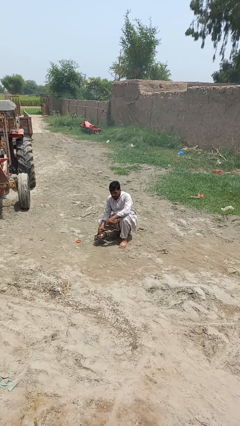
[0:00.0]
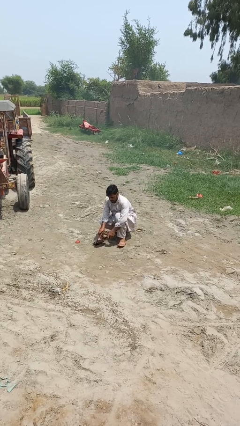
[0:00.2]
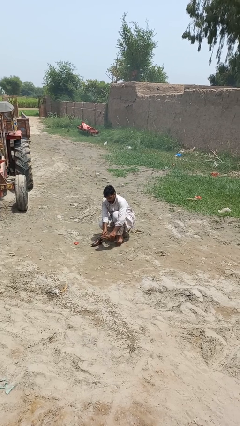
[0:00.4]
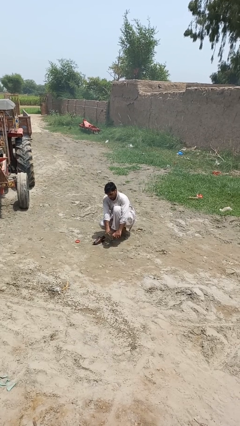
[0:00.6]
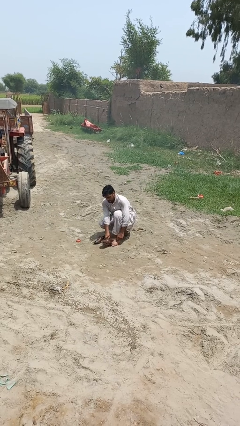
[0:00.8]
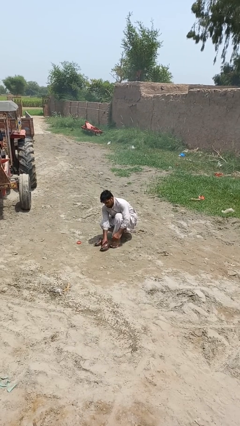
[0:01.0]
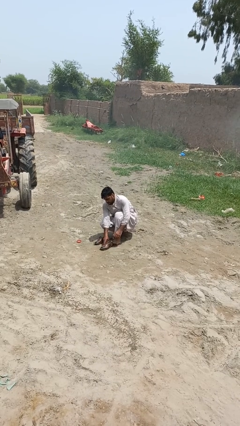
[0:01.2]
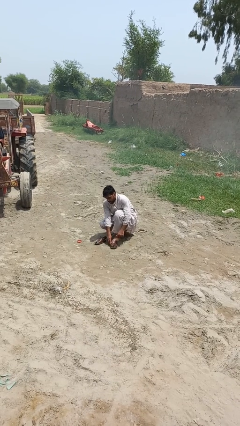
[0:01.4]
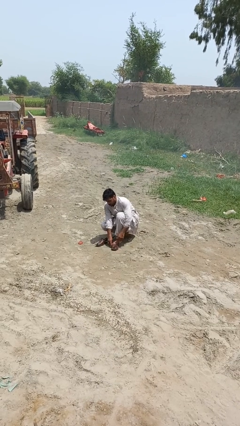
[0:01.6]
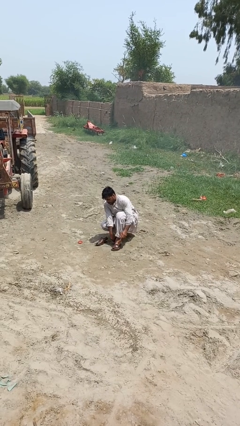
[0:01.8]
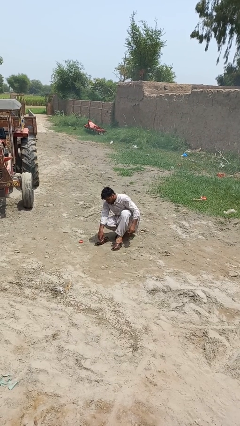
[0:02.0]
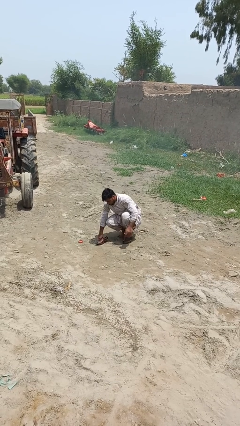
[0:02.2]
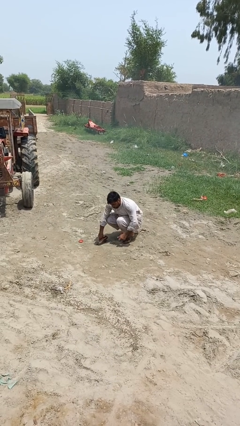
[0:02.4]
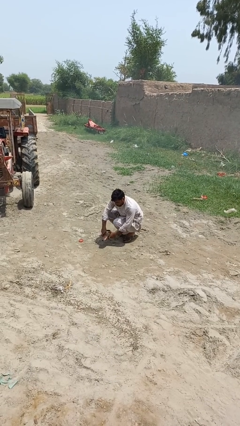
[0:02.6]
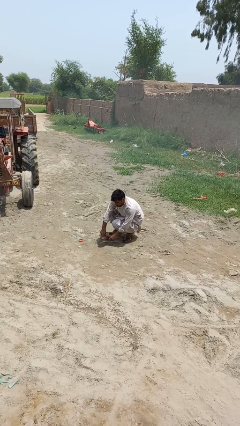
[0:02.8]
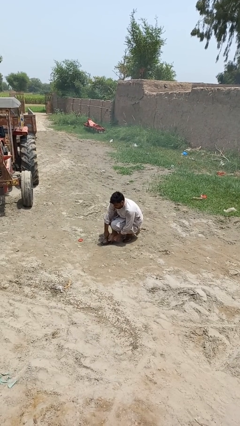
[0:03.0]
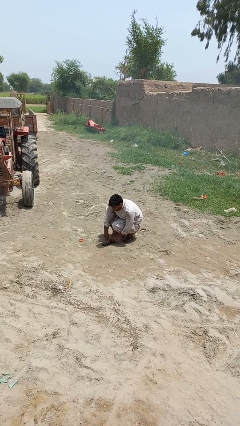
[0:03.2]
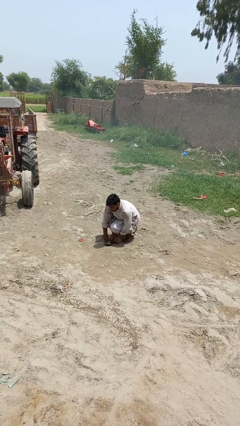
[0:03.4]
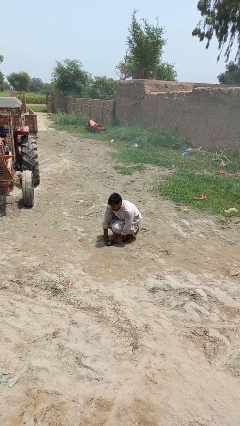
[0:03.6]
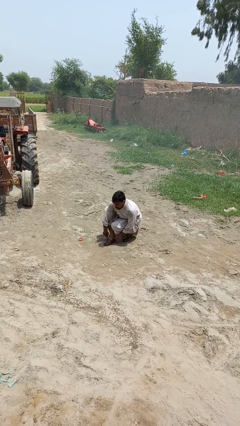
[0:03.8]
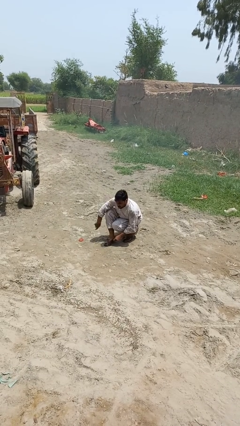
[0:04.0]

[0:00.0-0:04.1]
person puts on shoes

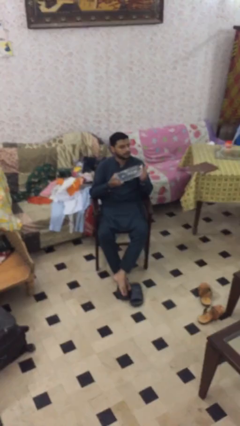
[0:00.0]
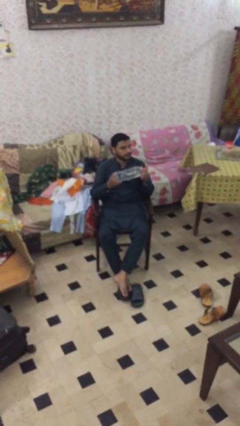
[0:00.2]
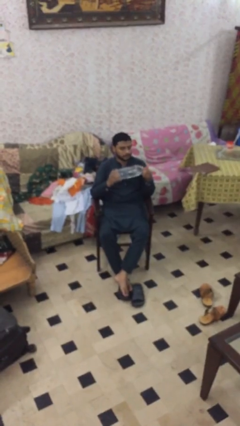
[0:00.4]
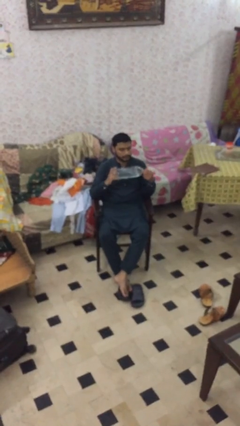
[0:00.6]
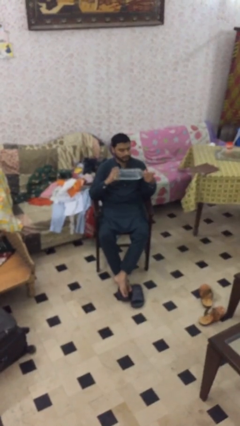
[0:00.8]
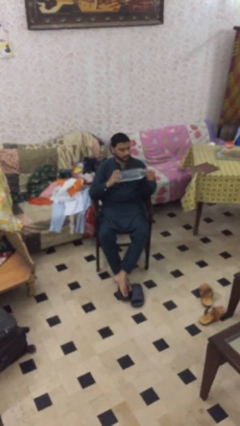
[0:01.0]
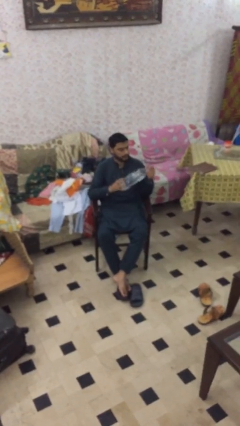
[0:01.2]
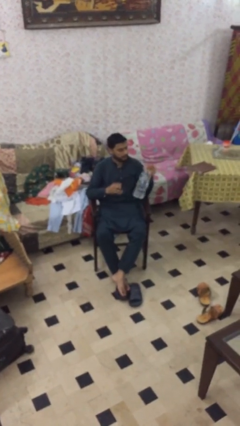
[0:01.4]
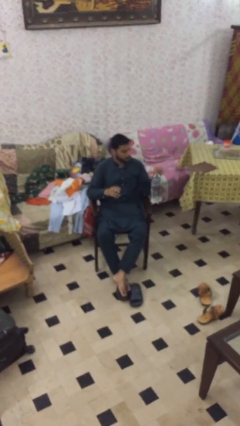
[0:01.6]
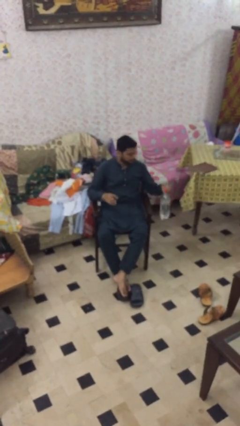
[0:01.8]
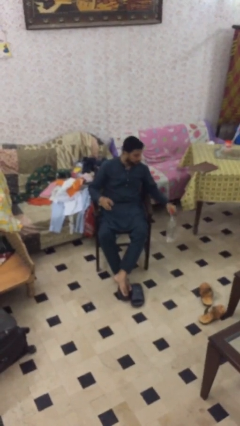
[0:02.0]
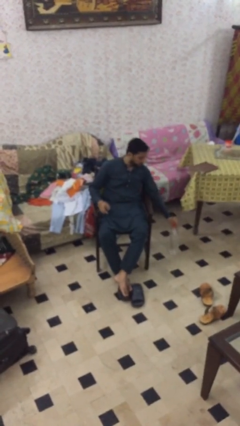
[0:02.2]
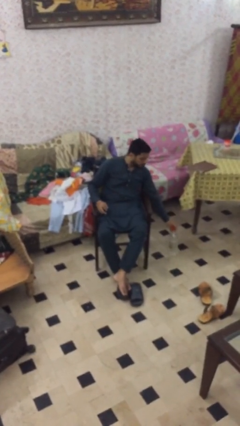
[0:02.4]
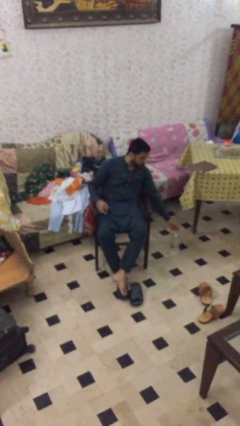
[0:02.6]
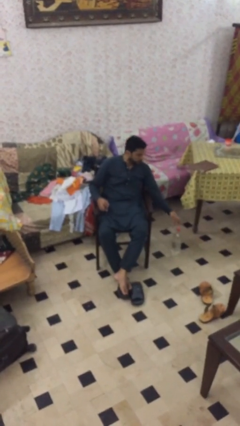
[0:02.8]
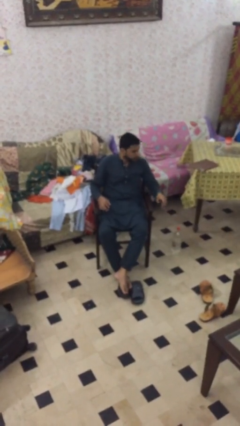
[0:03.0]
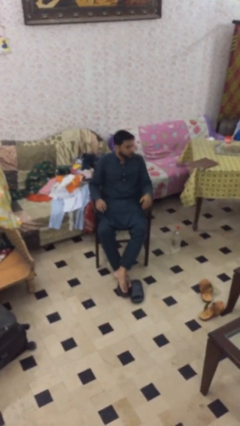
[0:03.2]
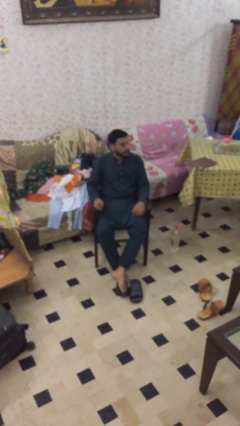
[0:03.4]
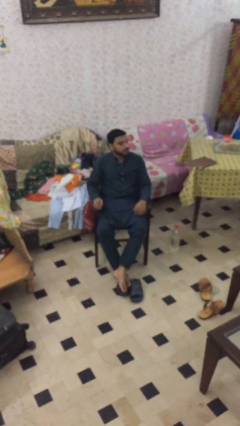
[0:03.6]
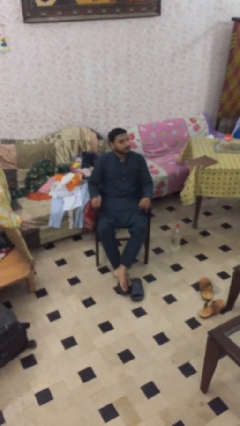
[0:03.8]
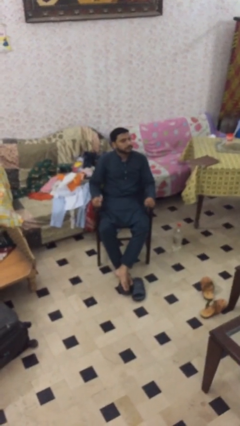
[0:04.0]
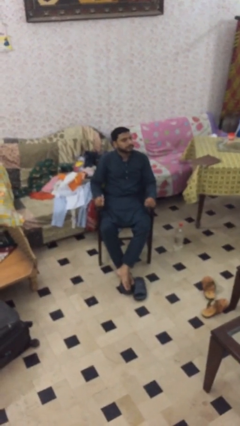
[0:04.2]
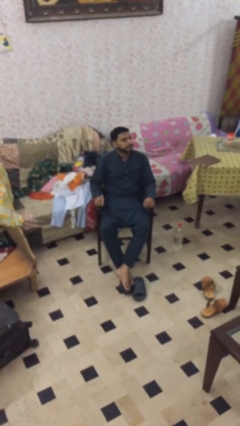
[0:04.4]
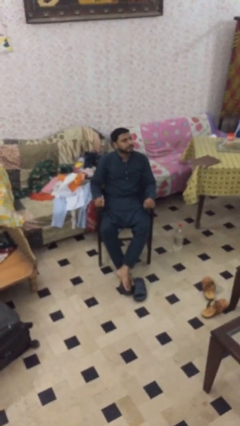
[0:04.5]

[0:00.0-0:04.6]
person puts down object on floor

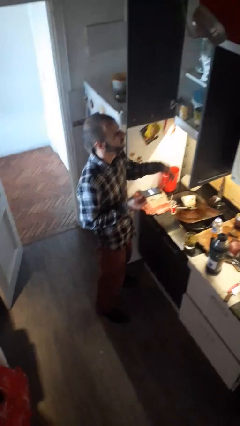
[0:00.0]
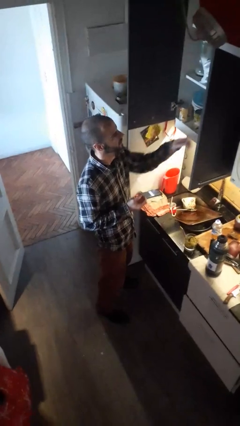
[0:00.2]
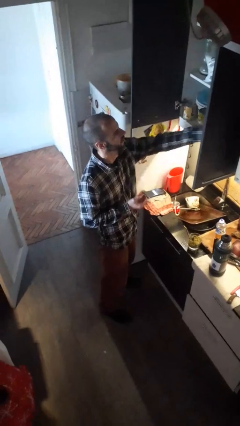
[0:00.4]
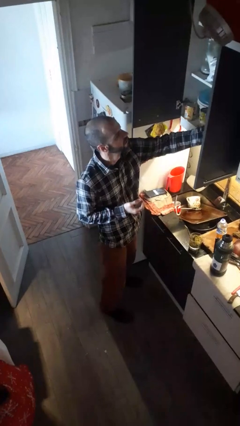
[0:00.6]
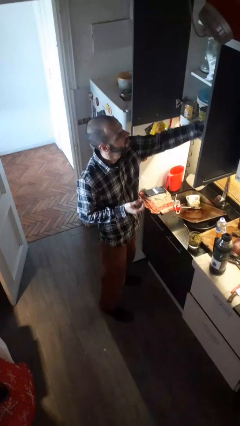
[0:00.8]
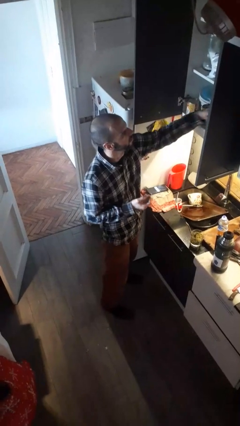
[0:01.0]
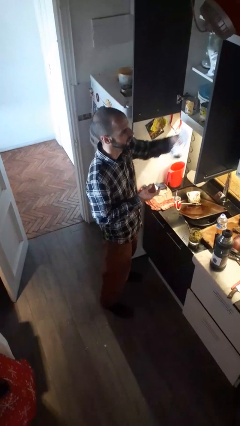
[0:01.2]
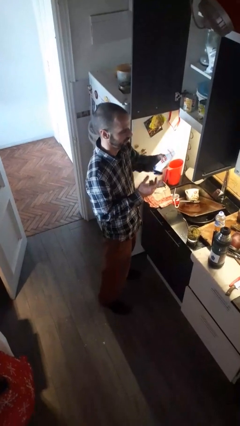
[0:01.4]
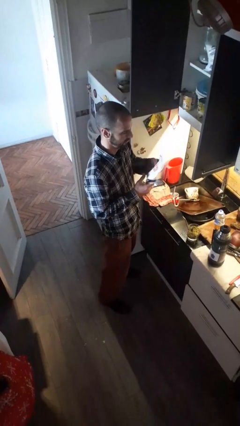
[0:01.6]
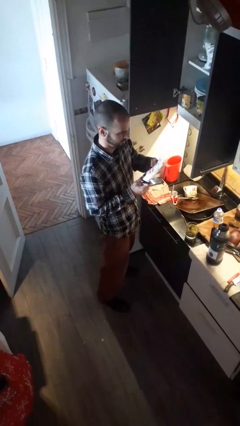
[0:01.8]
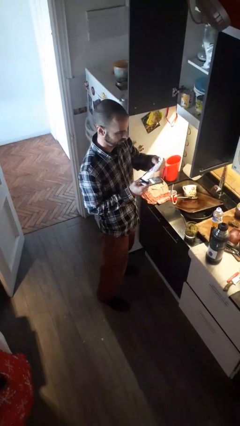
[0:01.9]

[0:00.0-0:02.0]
person takes object from kitchen drawer

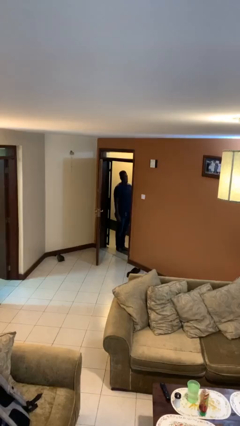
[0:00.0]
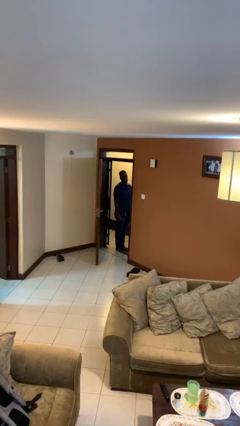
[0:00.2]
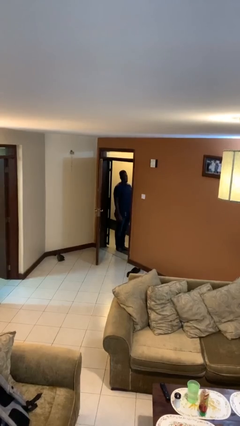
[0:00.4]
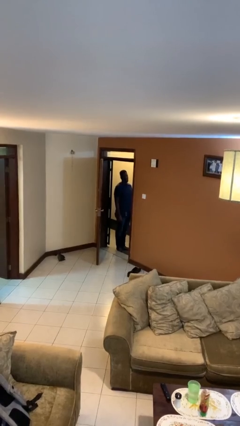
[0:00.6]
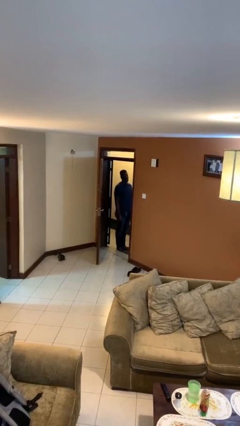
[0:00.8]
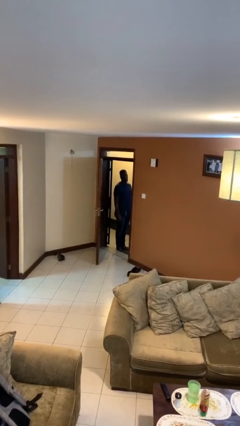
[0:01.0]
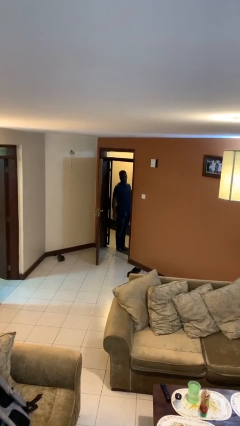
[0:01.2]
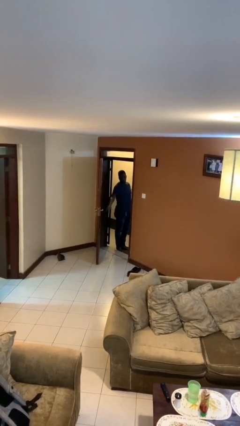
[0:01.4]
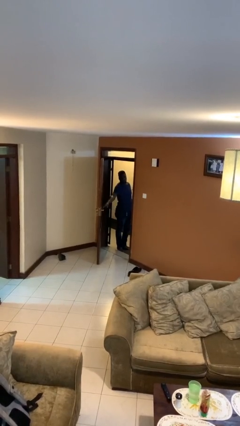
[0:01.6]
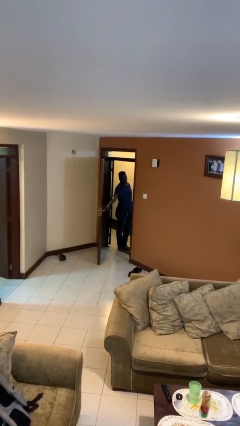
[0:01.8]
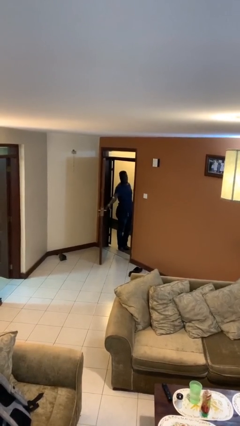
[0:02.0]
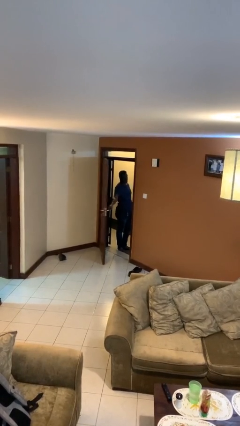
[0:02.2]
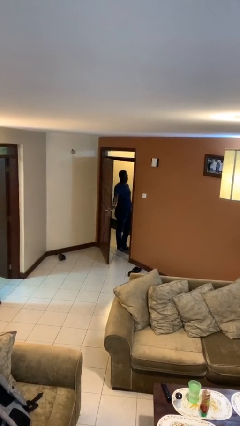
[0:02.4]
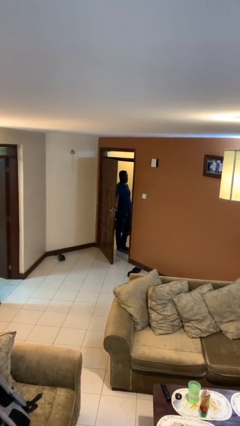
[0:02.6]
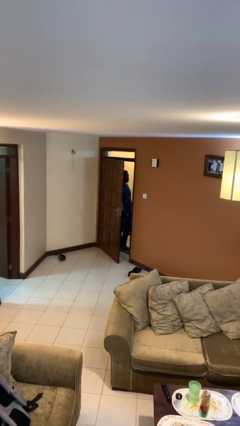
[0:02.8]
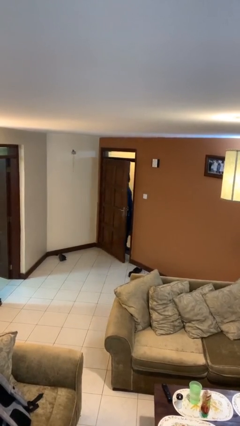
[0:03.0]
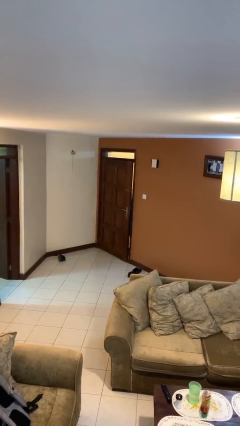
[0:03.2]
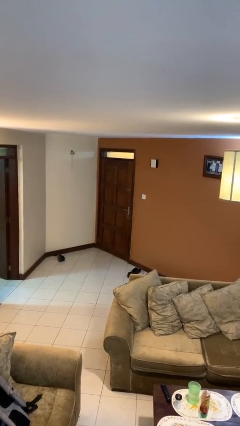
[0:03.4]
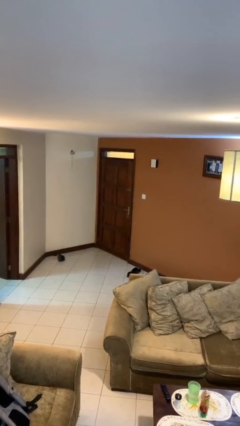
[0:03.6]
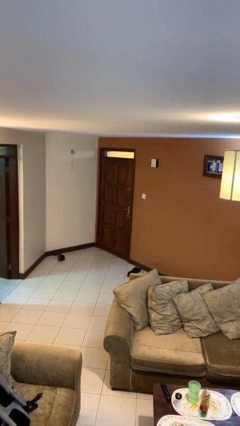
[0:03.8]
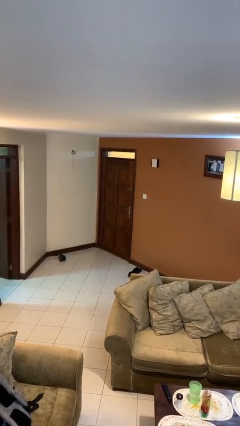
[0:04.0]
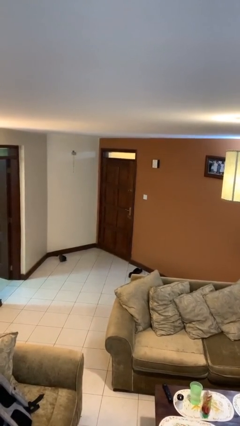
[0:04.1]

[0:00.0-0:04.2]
person closes facility door

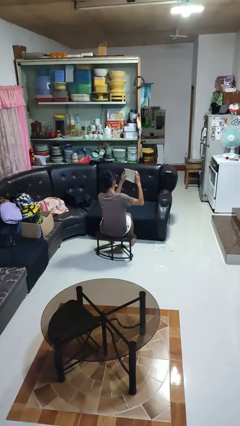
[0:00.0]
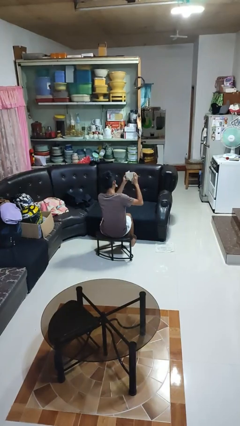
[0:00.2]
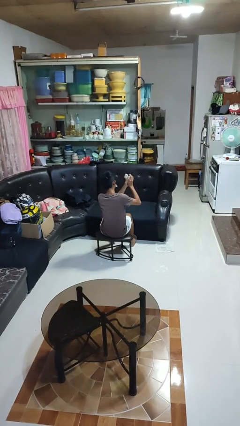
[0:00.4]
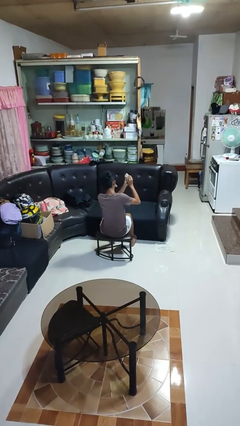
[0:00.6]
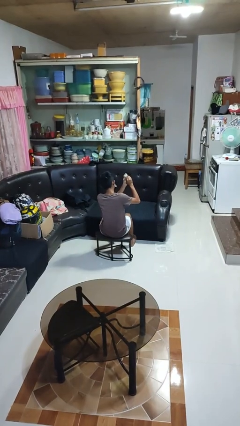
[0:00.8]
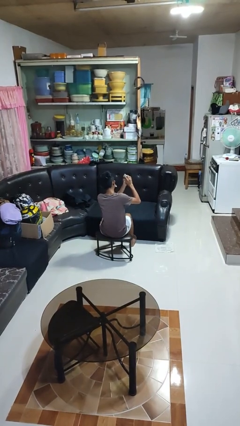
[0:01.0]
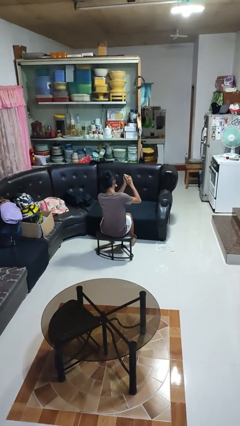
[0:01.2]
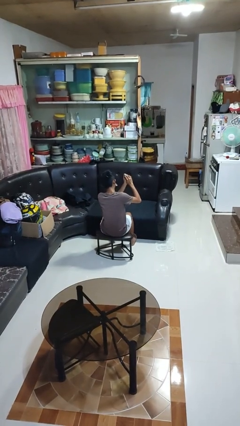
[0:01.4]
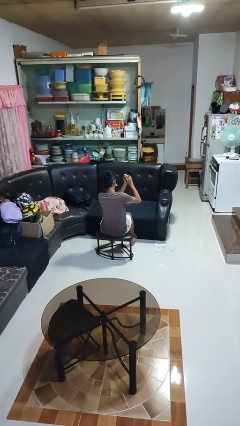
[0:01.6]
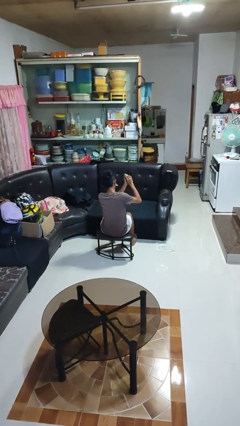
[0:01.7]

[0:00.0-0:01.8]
person crumples paper

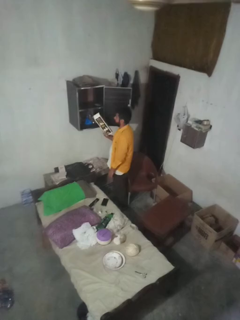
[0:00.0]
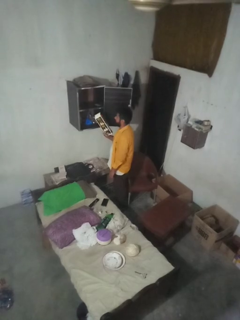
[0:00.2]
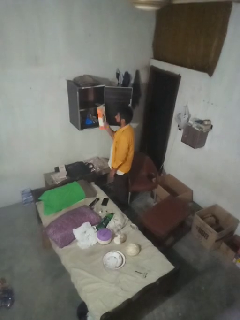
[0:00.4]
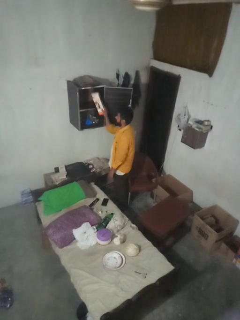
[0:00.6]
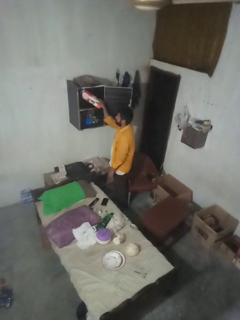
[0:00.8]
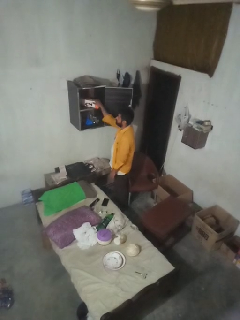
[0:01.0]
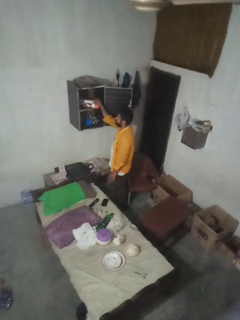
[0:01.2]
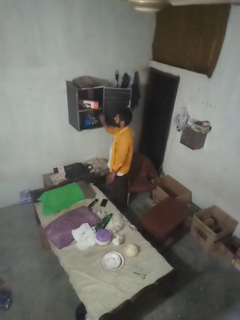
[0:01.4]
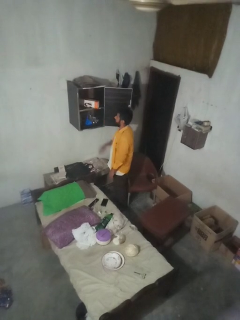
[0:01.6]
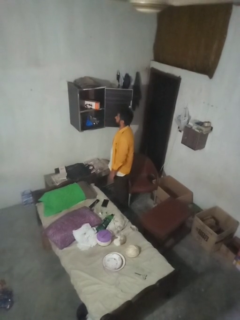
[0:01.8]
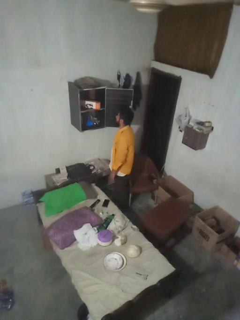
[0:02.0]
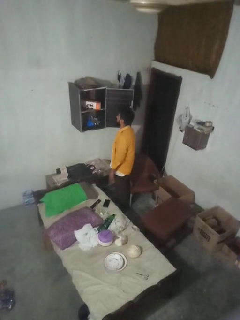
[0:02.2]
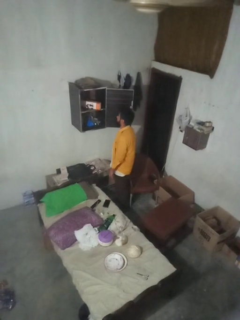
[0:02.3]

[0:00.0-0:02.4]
person puts down object into cabinet
